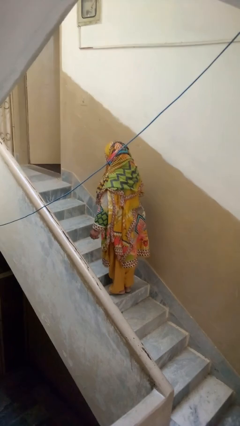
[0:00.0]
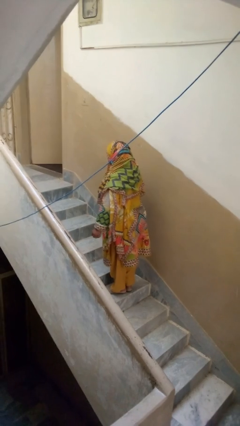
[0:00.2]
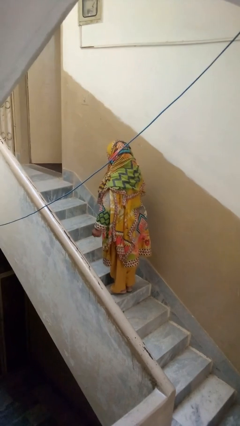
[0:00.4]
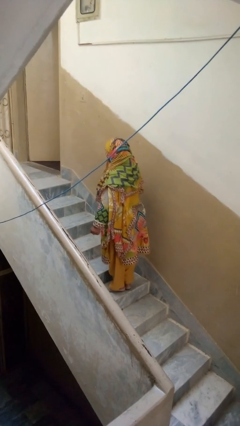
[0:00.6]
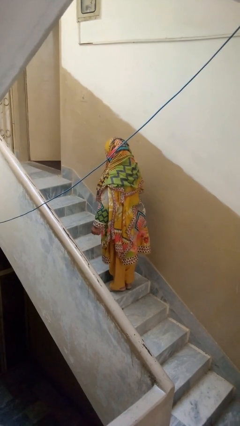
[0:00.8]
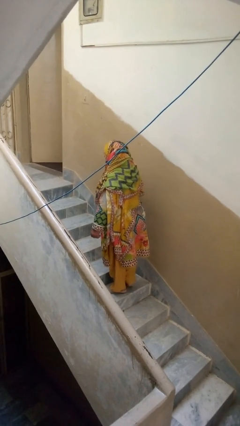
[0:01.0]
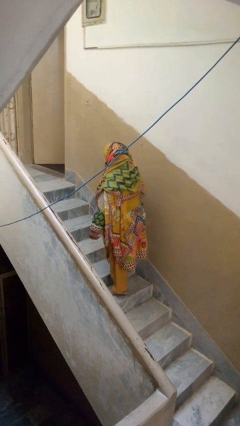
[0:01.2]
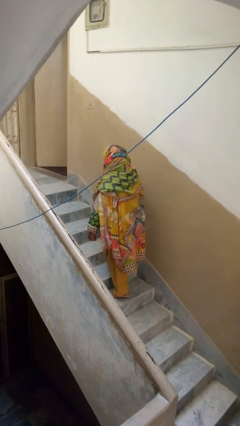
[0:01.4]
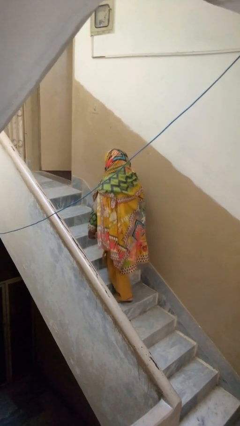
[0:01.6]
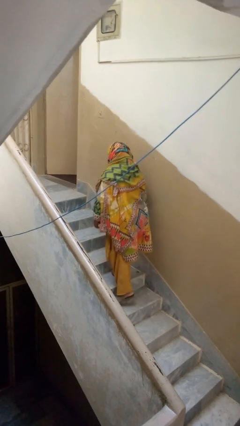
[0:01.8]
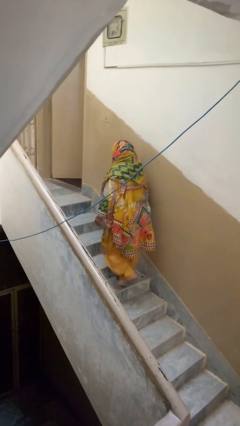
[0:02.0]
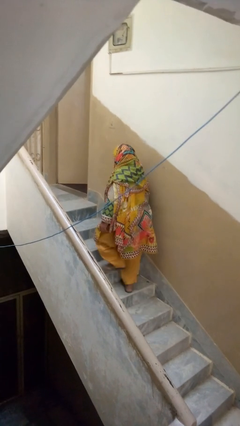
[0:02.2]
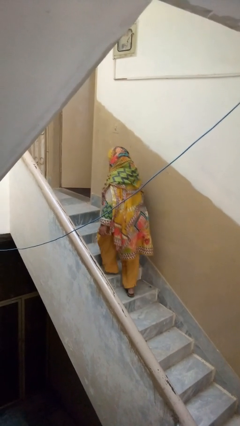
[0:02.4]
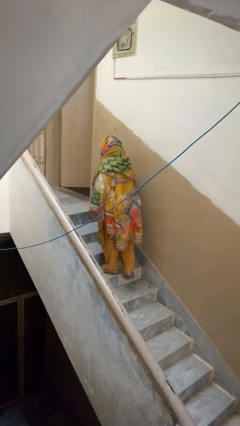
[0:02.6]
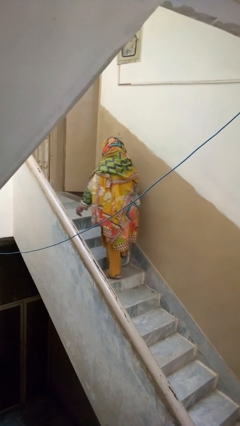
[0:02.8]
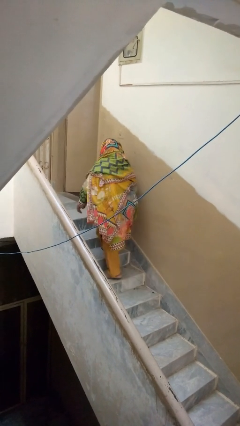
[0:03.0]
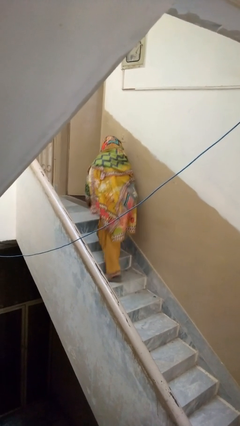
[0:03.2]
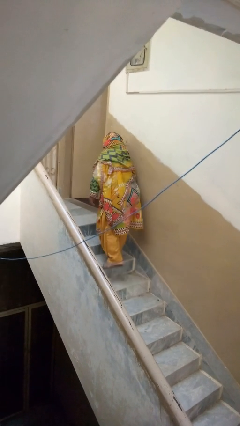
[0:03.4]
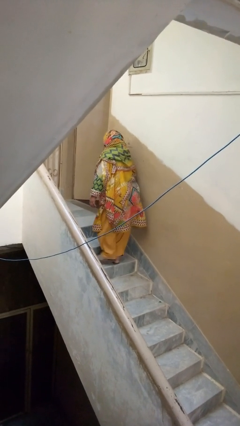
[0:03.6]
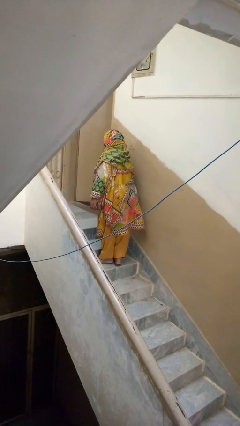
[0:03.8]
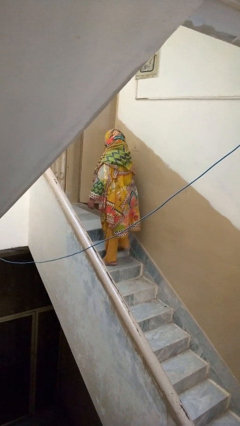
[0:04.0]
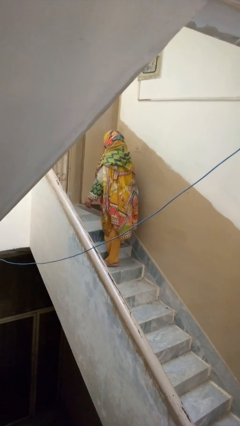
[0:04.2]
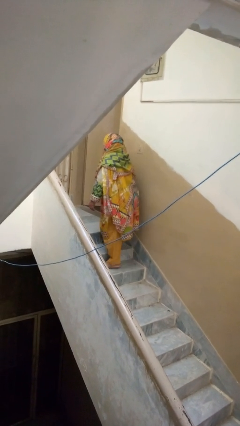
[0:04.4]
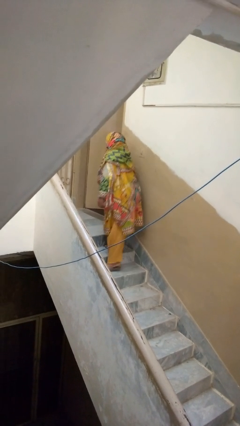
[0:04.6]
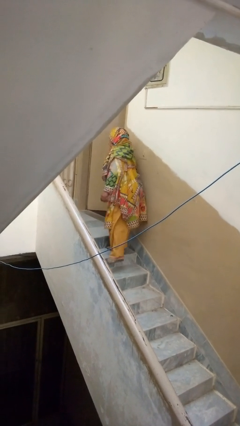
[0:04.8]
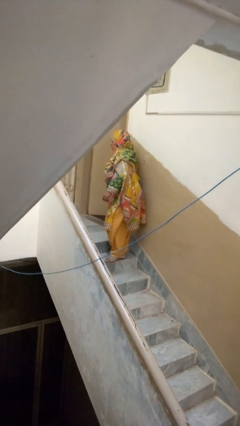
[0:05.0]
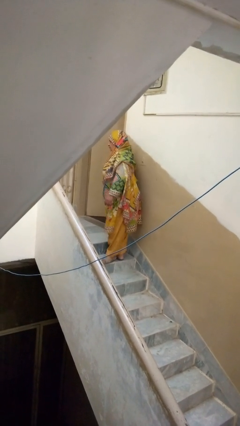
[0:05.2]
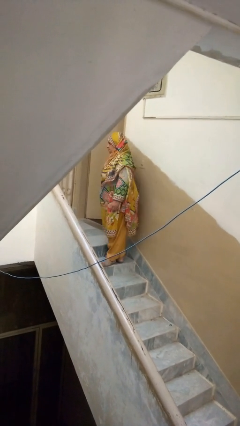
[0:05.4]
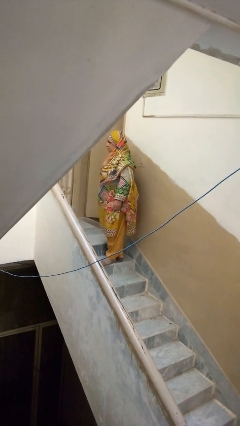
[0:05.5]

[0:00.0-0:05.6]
person climbs up stairs

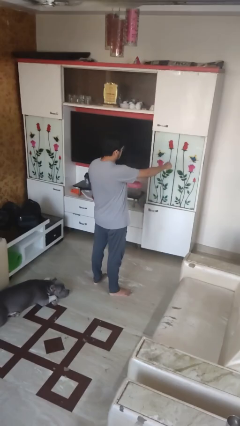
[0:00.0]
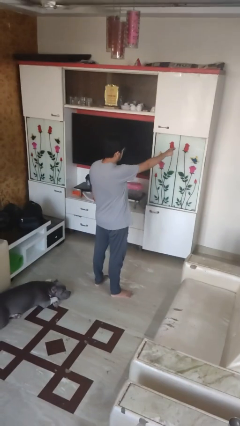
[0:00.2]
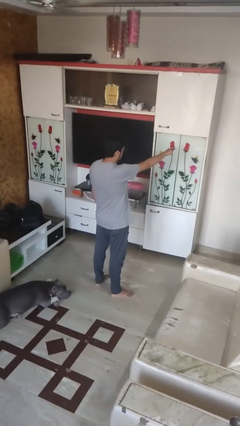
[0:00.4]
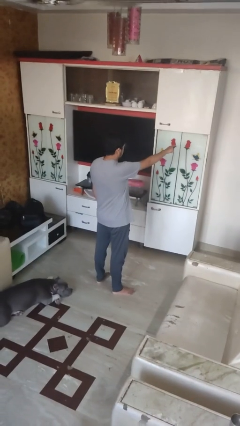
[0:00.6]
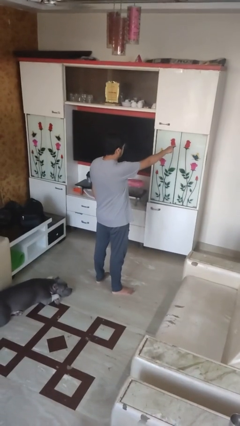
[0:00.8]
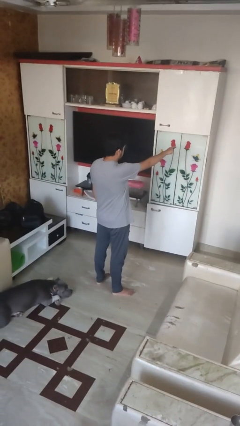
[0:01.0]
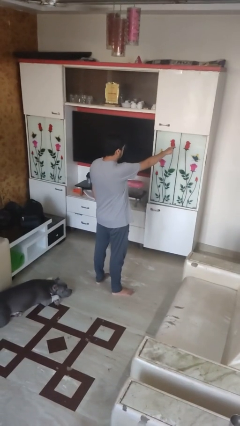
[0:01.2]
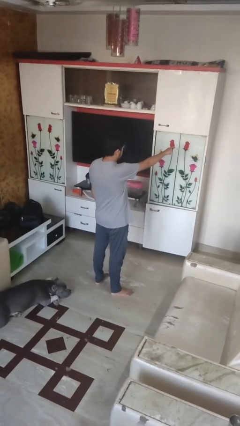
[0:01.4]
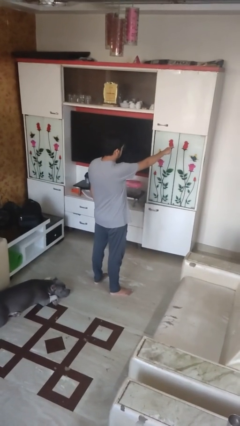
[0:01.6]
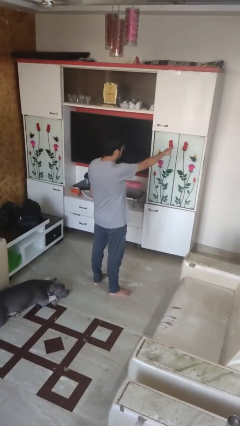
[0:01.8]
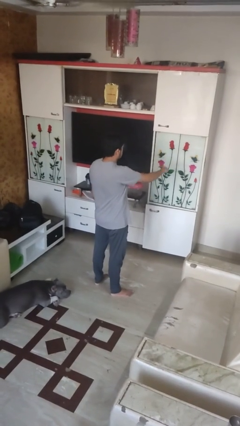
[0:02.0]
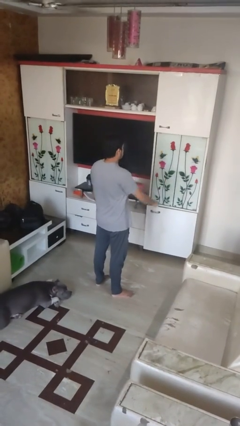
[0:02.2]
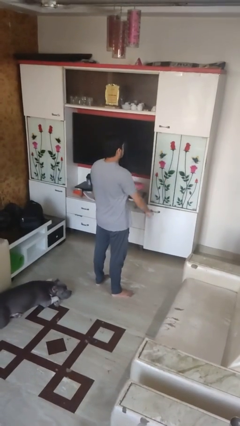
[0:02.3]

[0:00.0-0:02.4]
person points at person

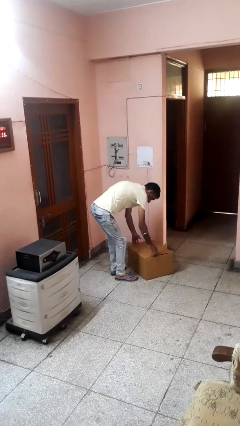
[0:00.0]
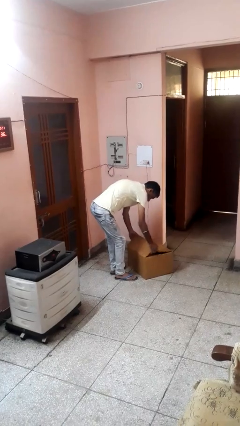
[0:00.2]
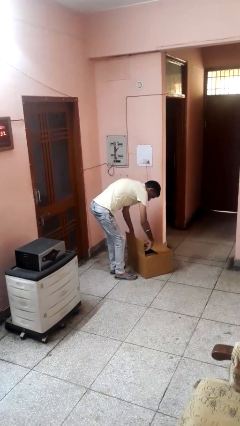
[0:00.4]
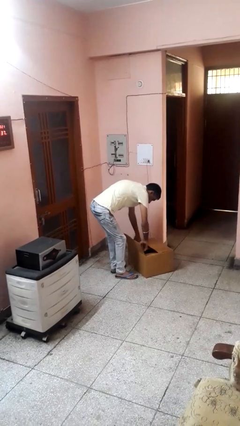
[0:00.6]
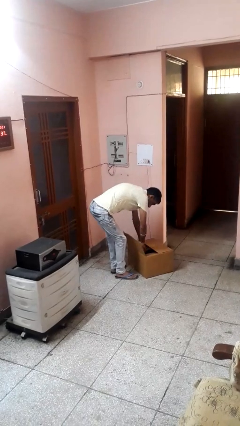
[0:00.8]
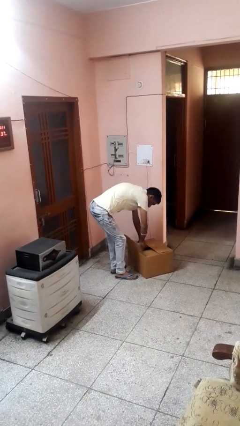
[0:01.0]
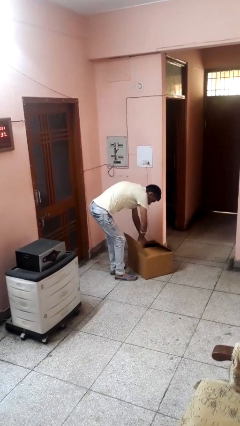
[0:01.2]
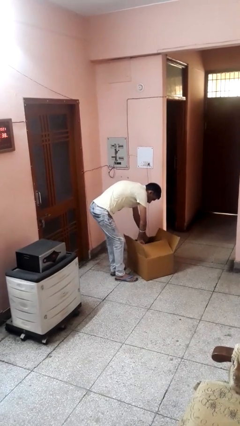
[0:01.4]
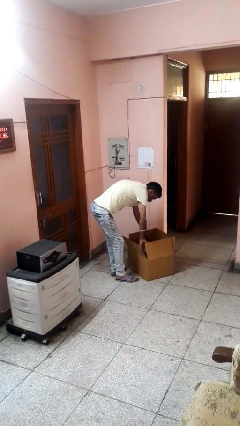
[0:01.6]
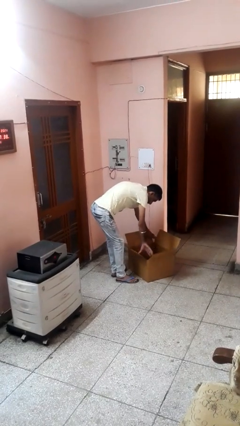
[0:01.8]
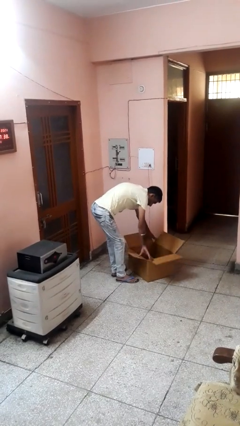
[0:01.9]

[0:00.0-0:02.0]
person opens box

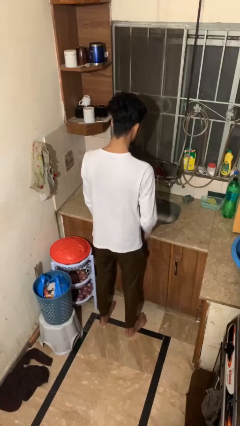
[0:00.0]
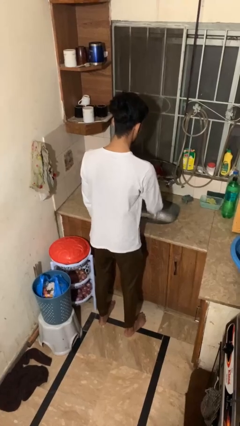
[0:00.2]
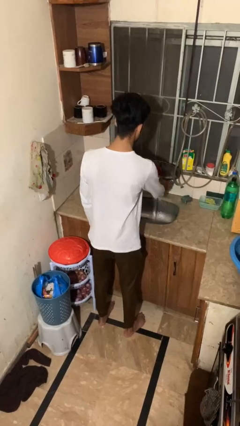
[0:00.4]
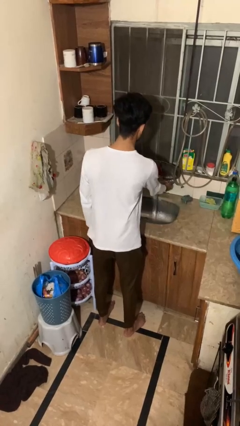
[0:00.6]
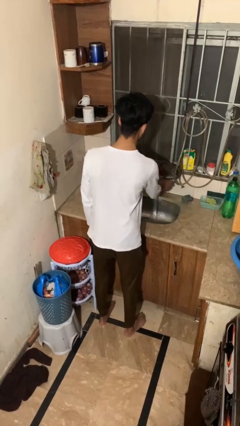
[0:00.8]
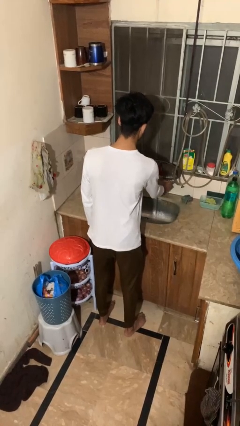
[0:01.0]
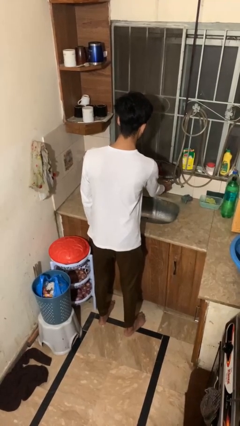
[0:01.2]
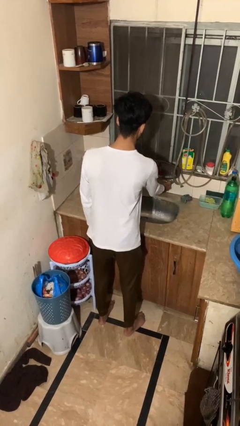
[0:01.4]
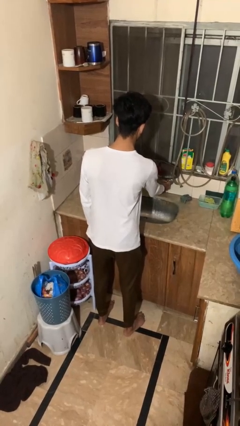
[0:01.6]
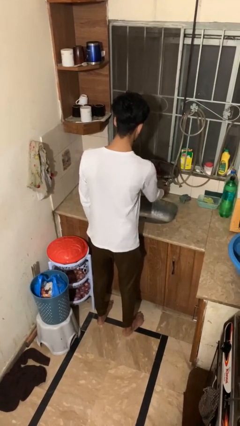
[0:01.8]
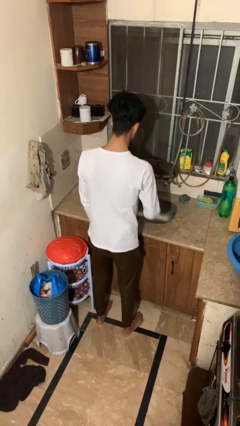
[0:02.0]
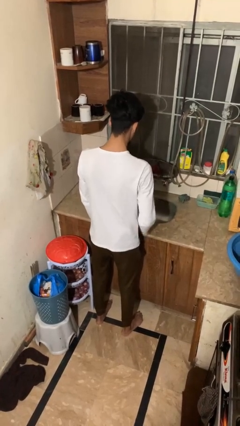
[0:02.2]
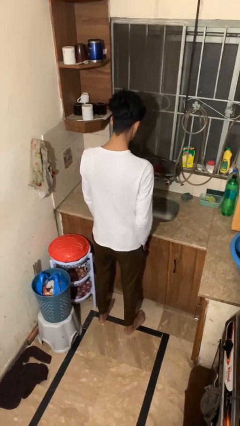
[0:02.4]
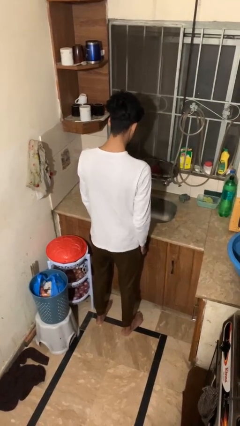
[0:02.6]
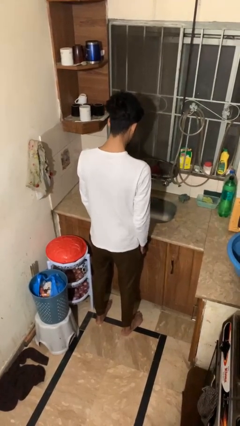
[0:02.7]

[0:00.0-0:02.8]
person turns off faucet

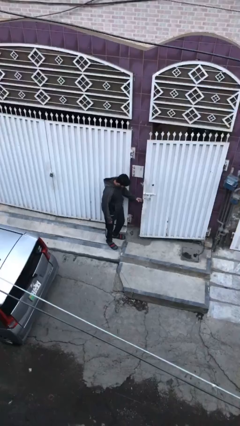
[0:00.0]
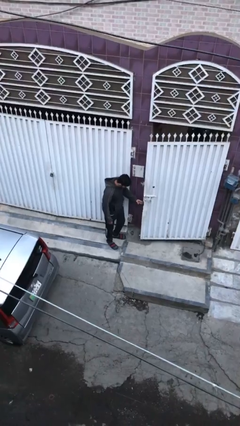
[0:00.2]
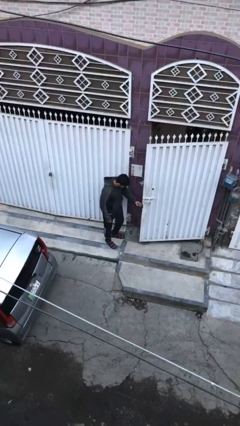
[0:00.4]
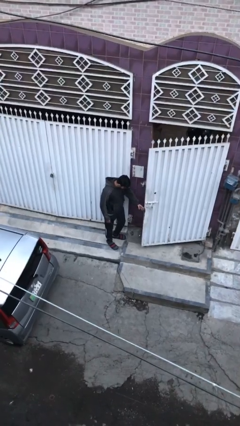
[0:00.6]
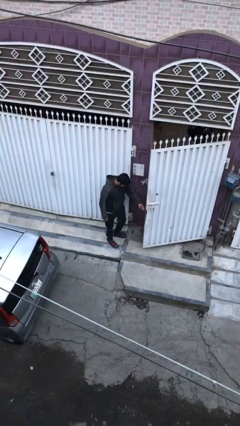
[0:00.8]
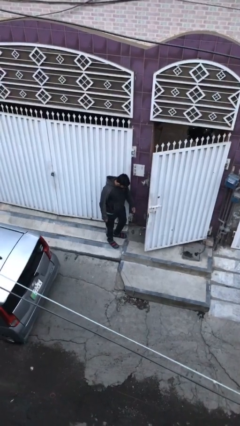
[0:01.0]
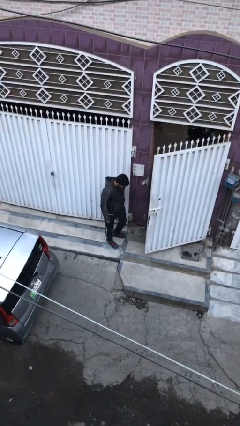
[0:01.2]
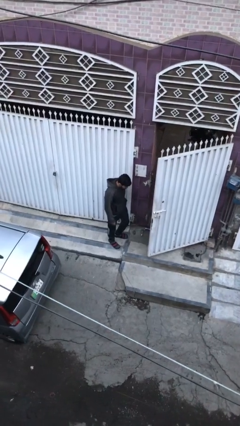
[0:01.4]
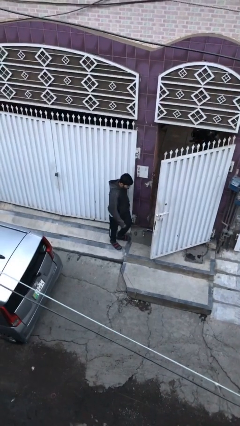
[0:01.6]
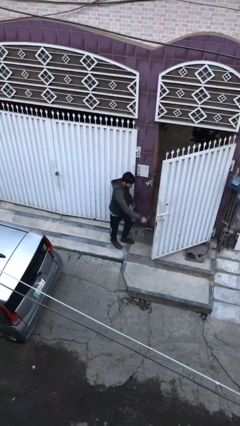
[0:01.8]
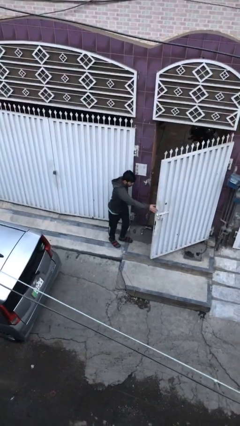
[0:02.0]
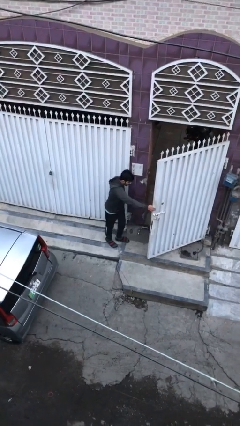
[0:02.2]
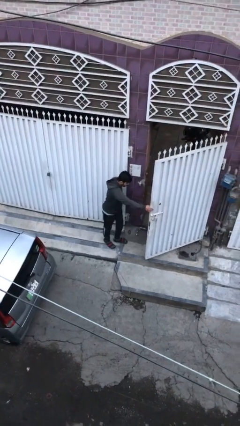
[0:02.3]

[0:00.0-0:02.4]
person opens facility door

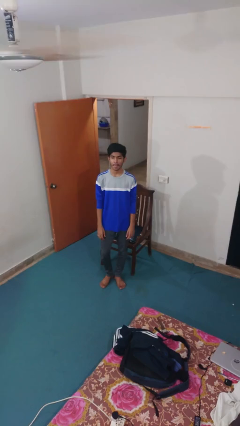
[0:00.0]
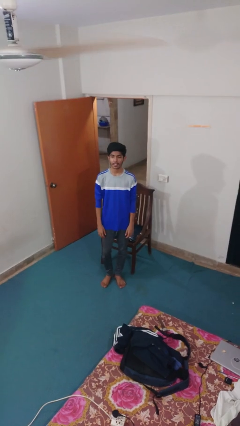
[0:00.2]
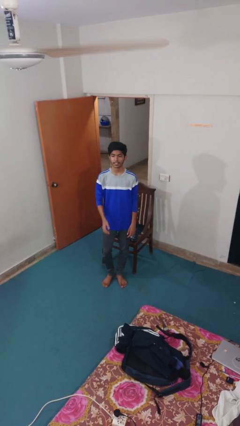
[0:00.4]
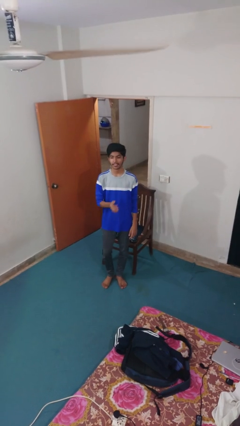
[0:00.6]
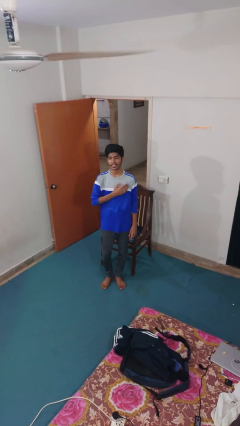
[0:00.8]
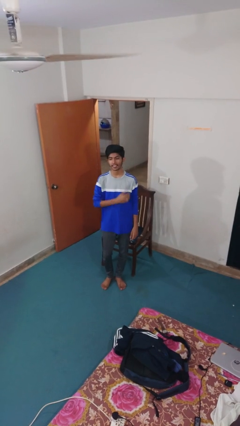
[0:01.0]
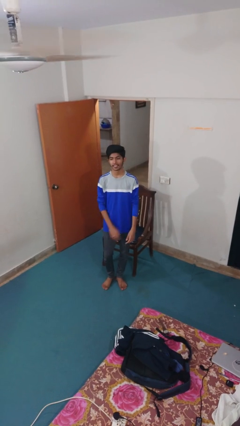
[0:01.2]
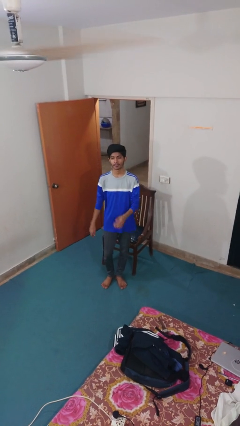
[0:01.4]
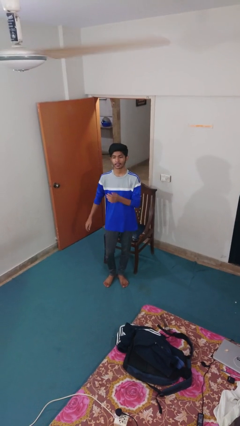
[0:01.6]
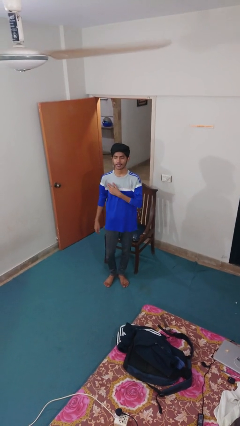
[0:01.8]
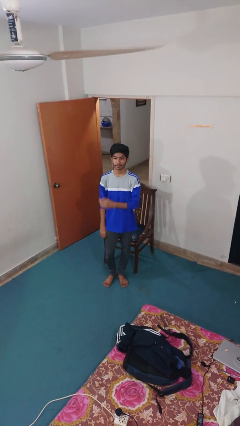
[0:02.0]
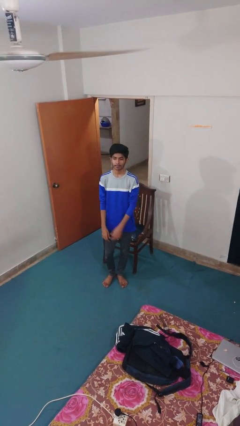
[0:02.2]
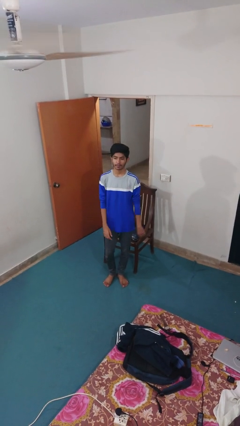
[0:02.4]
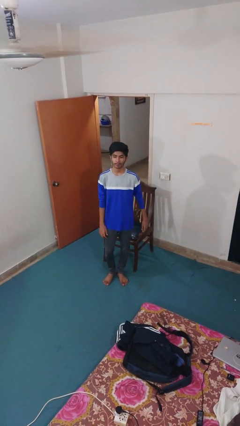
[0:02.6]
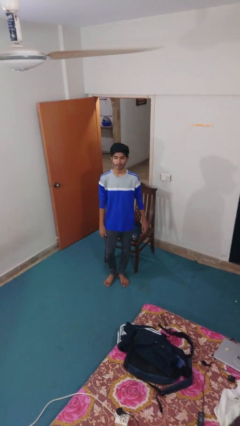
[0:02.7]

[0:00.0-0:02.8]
person drums on chest
